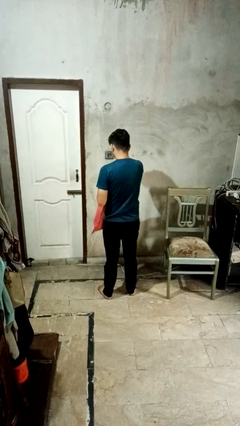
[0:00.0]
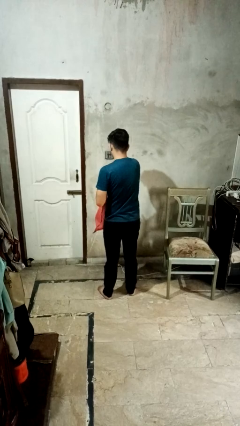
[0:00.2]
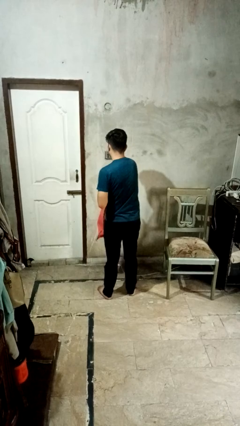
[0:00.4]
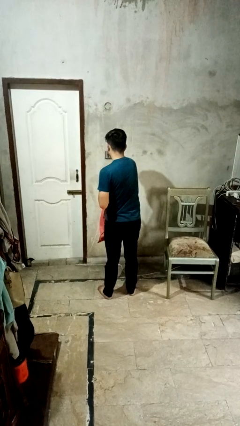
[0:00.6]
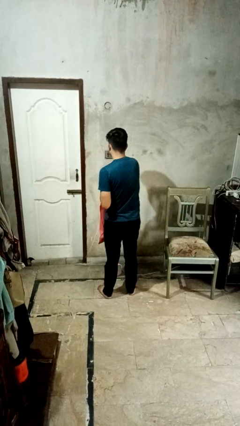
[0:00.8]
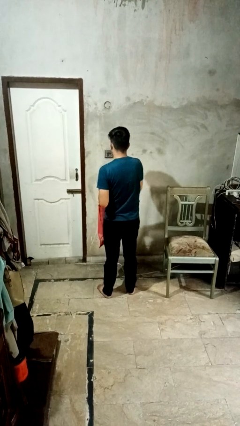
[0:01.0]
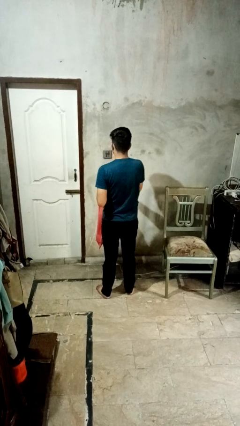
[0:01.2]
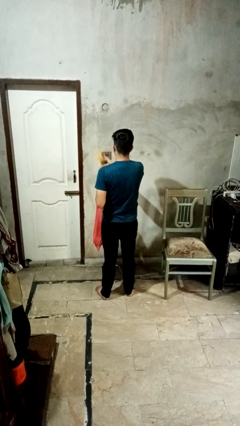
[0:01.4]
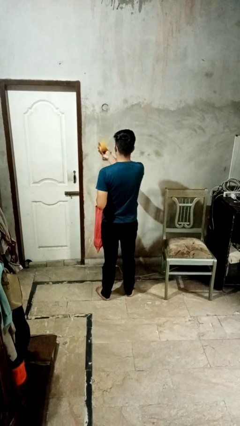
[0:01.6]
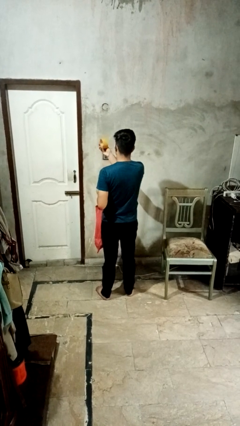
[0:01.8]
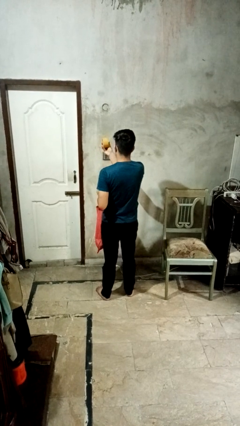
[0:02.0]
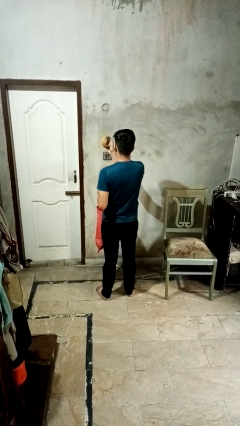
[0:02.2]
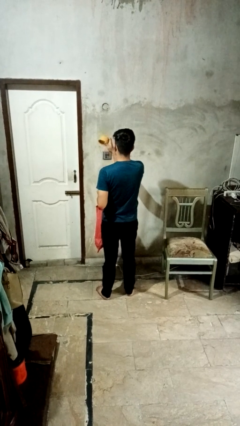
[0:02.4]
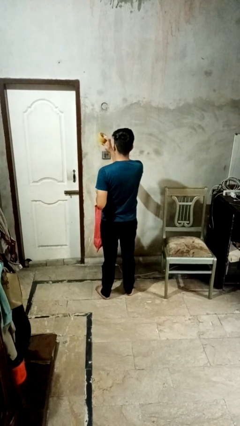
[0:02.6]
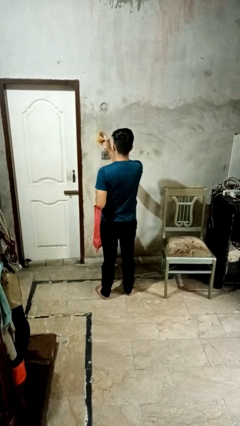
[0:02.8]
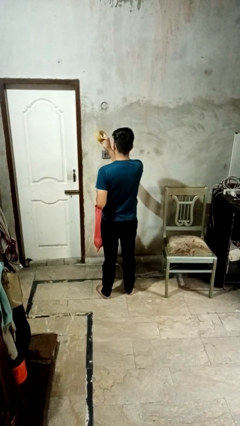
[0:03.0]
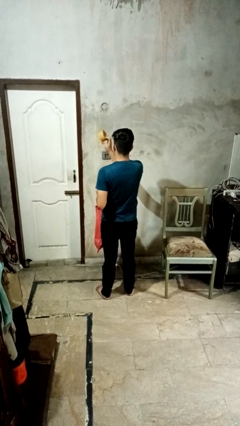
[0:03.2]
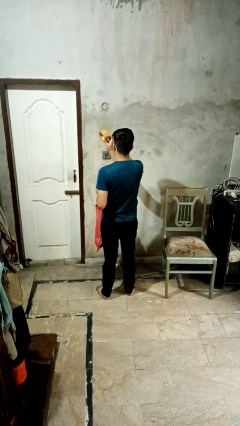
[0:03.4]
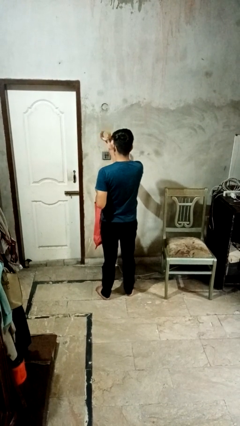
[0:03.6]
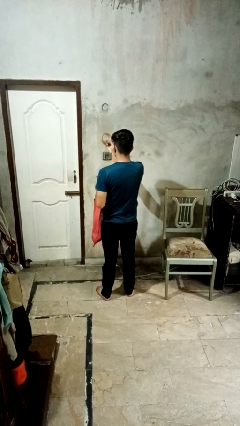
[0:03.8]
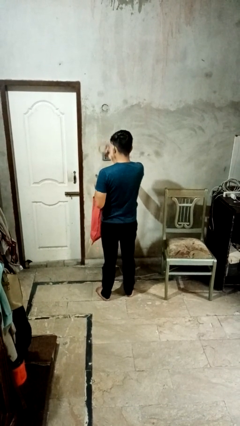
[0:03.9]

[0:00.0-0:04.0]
person takes object from bag

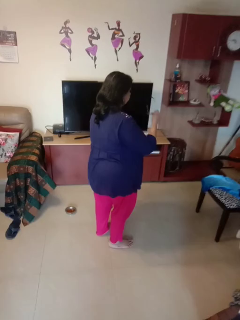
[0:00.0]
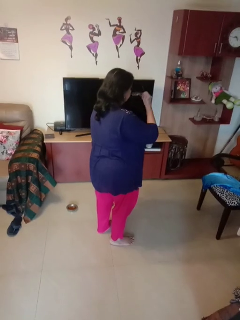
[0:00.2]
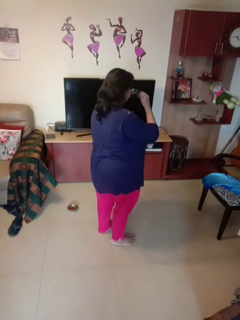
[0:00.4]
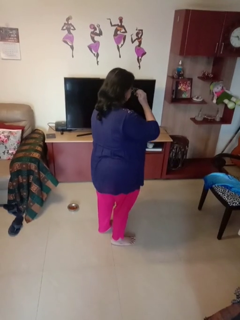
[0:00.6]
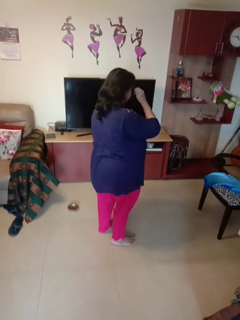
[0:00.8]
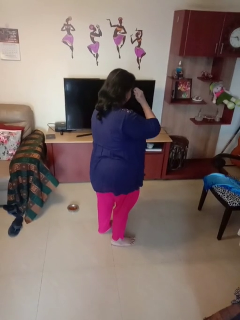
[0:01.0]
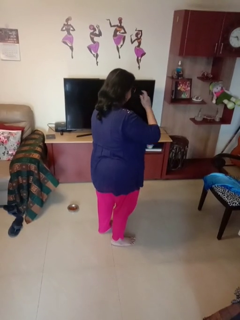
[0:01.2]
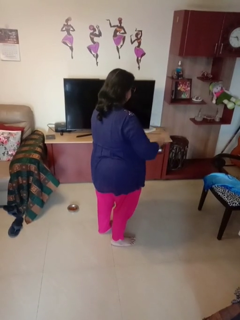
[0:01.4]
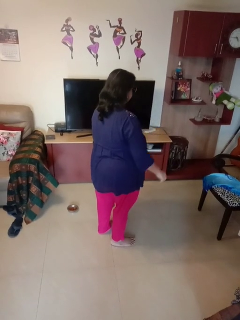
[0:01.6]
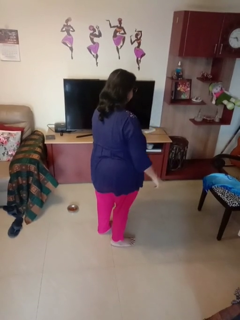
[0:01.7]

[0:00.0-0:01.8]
person puts on sunglasses

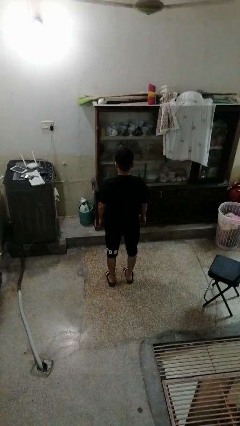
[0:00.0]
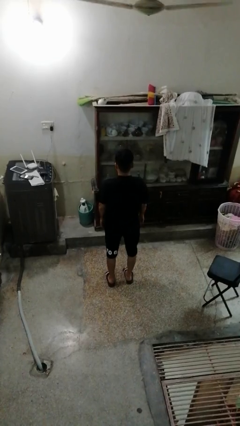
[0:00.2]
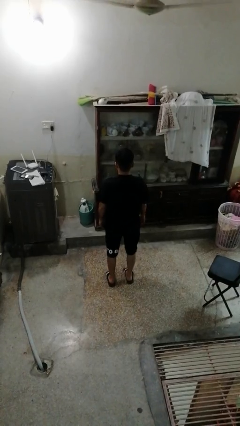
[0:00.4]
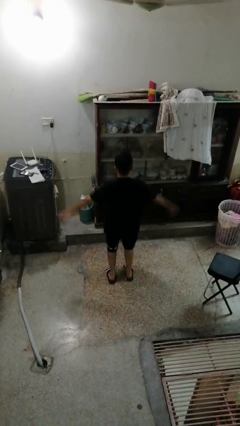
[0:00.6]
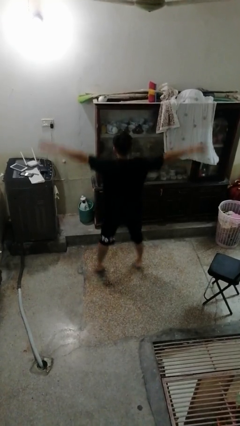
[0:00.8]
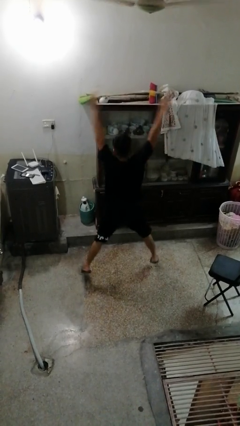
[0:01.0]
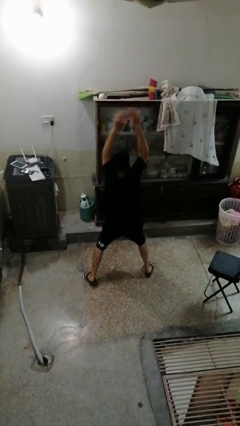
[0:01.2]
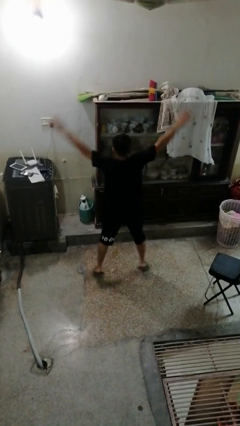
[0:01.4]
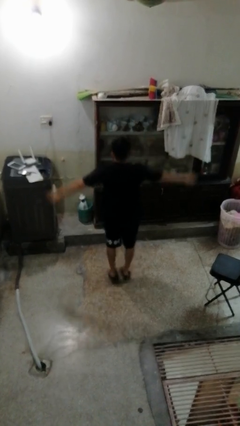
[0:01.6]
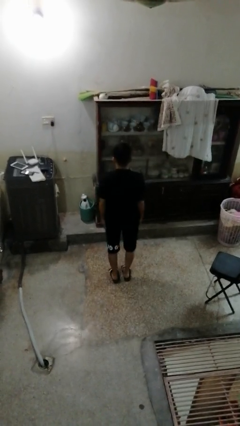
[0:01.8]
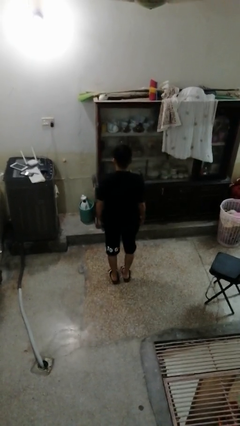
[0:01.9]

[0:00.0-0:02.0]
person exercises with jumping jacks

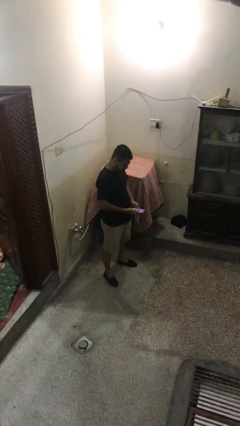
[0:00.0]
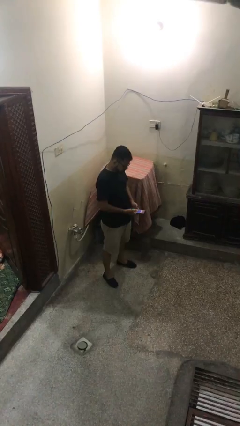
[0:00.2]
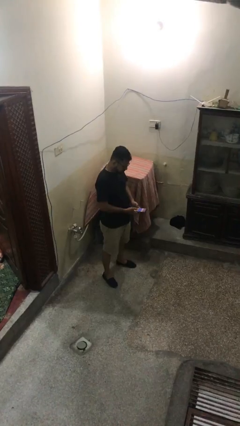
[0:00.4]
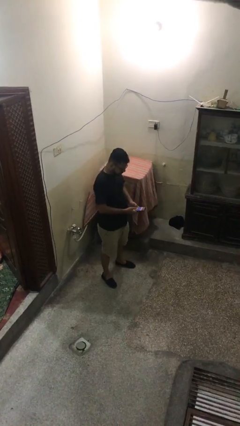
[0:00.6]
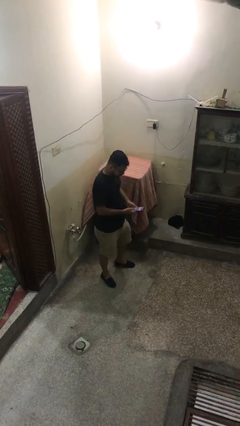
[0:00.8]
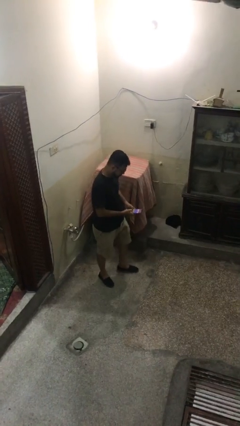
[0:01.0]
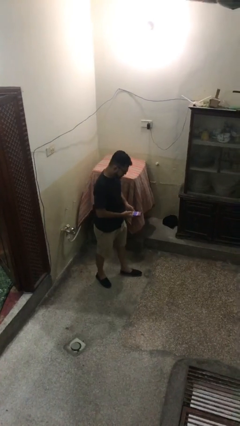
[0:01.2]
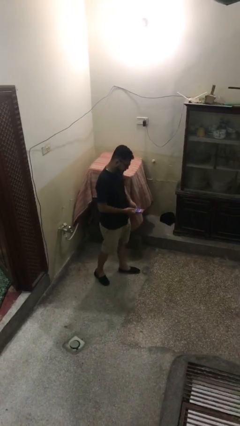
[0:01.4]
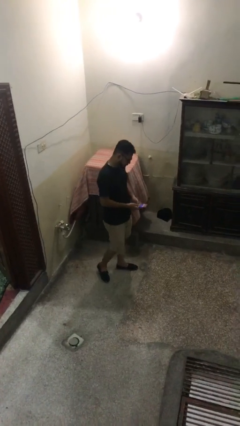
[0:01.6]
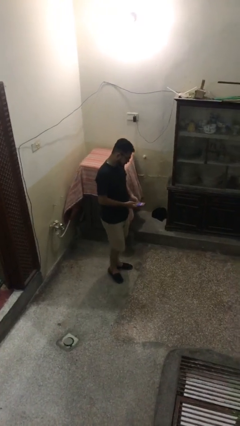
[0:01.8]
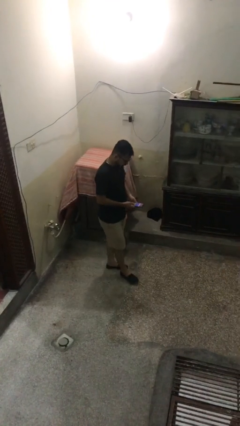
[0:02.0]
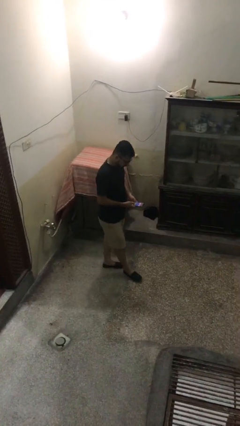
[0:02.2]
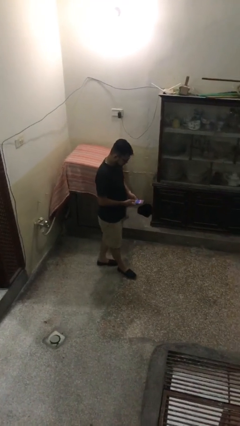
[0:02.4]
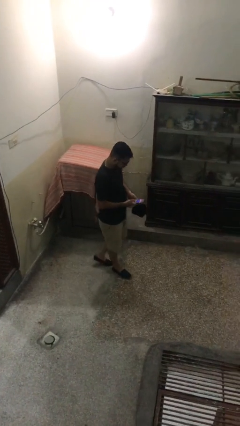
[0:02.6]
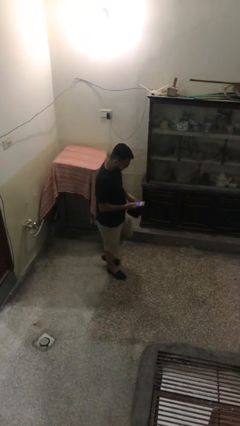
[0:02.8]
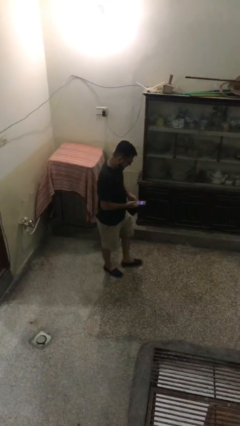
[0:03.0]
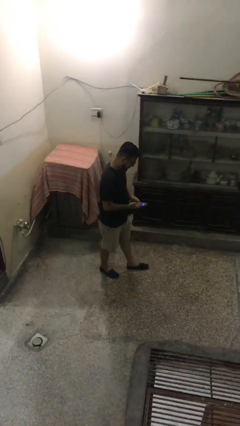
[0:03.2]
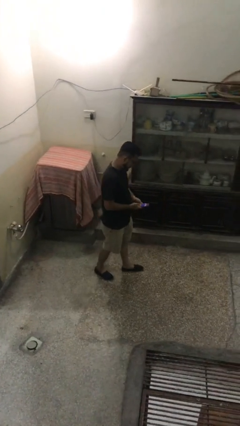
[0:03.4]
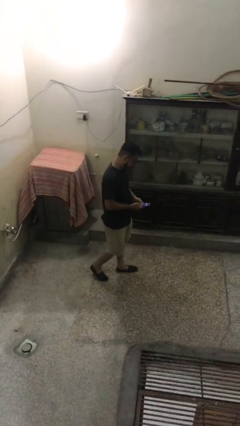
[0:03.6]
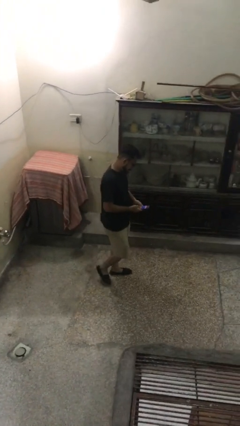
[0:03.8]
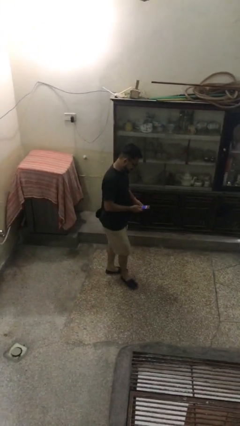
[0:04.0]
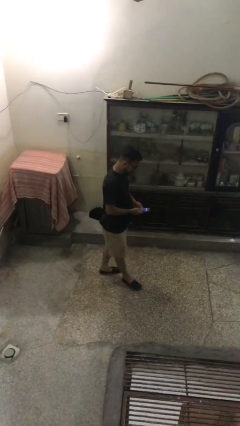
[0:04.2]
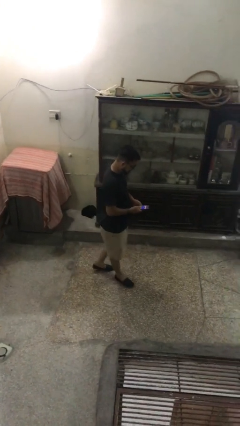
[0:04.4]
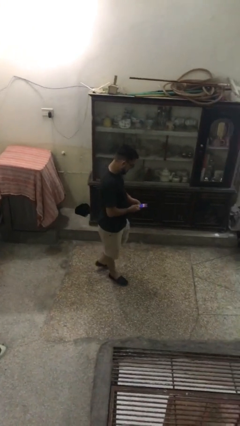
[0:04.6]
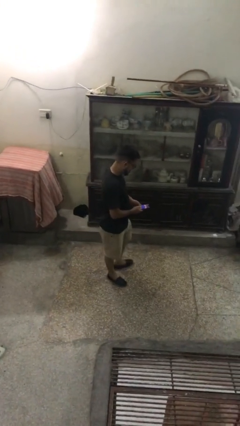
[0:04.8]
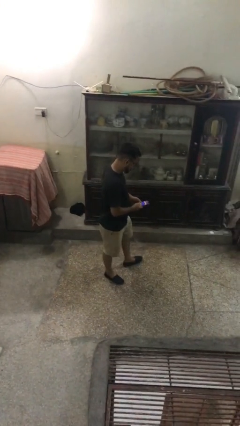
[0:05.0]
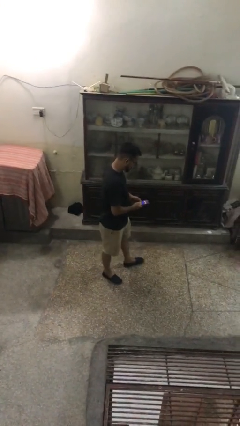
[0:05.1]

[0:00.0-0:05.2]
person texts on phone

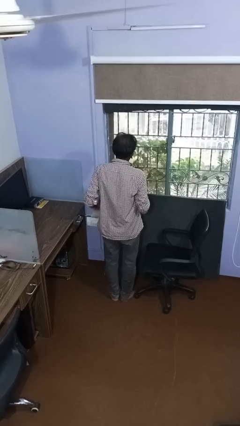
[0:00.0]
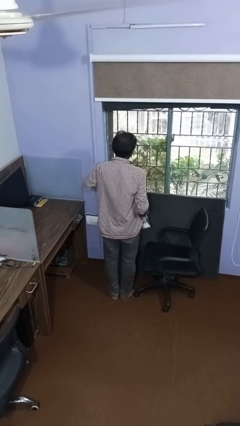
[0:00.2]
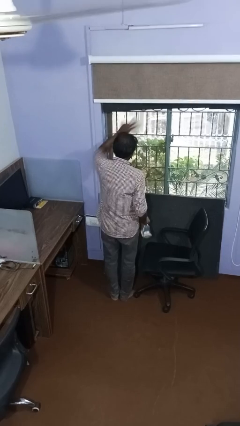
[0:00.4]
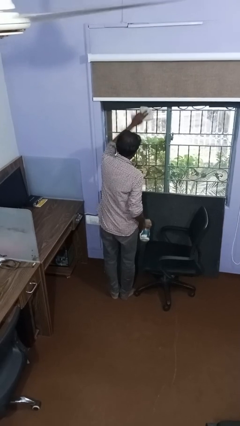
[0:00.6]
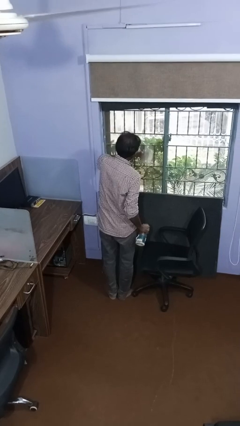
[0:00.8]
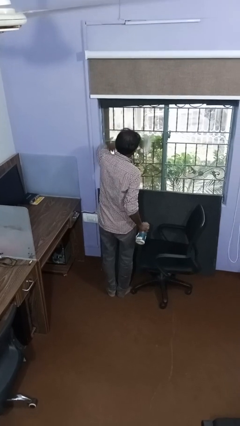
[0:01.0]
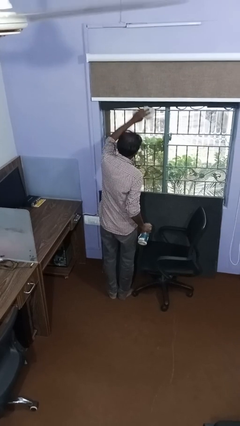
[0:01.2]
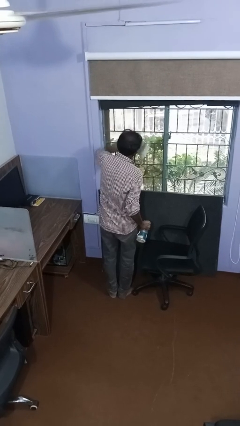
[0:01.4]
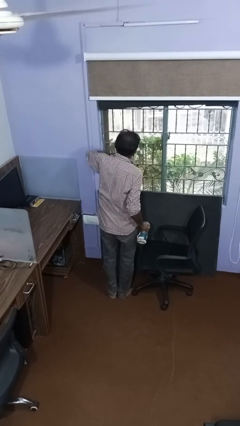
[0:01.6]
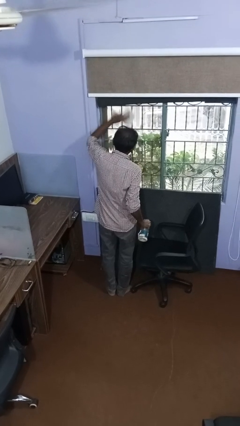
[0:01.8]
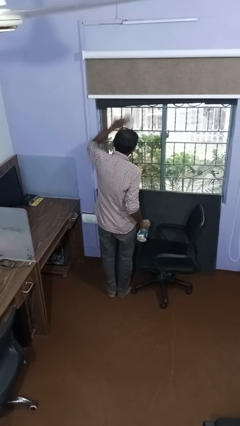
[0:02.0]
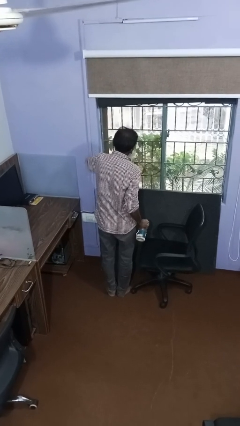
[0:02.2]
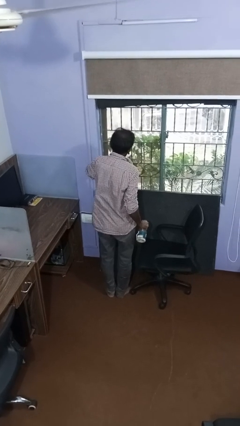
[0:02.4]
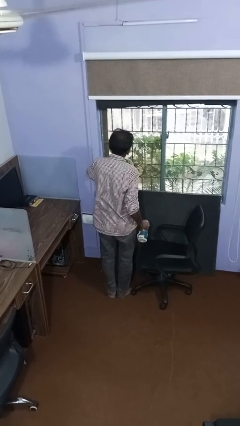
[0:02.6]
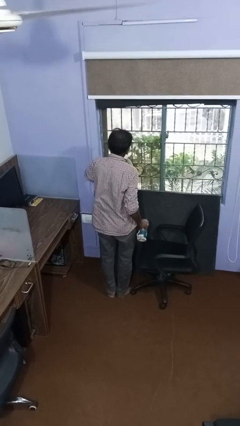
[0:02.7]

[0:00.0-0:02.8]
person washes window

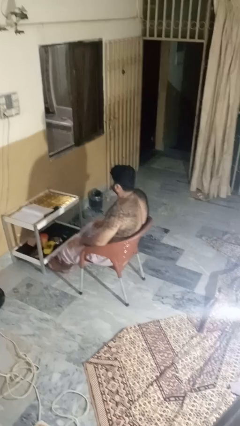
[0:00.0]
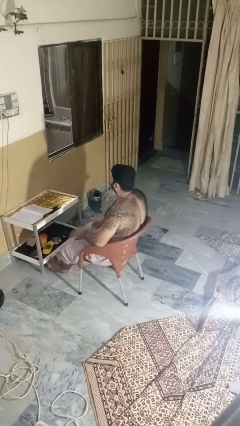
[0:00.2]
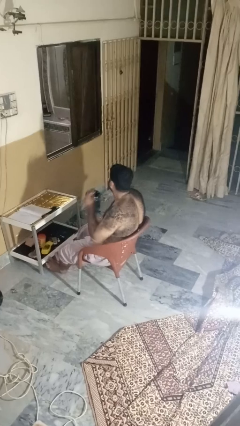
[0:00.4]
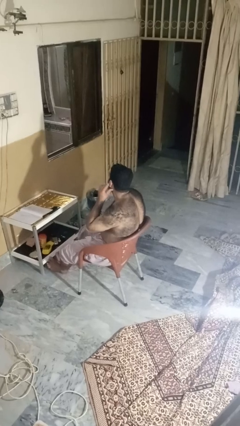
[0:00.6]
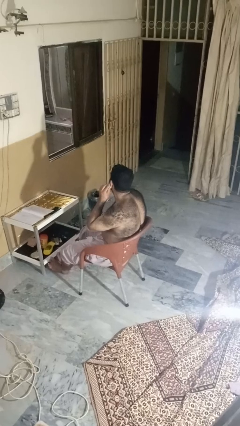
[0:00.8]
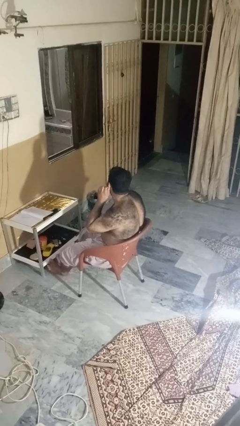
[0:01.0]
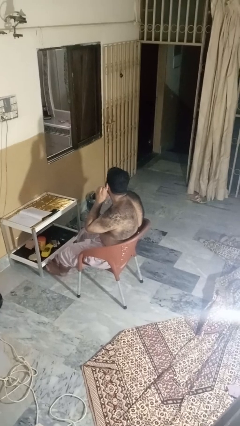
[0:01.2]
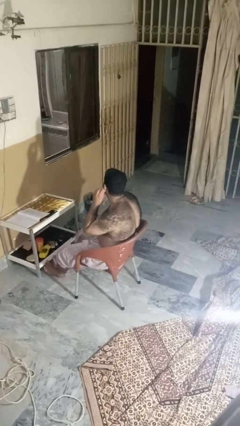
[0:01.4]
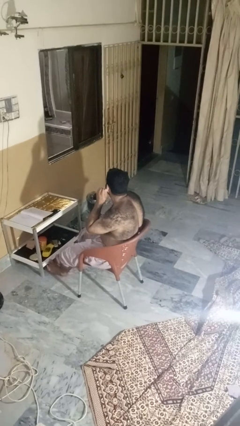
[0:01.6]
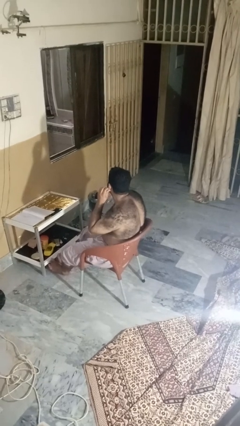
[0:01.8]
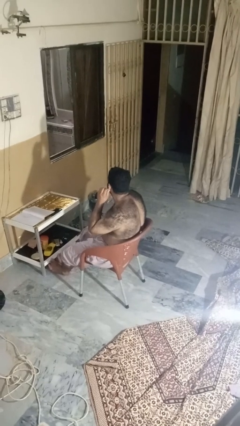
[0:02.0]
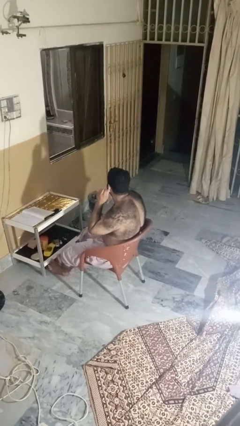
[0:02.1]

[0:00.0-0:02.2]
person touches earlobe
